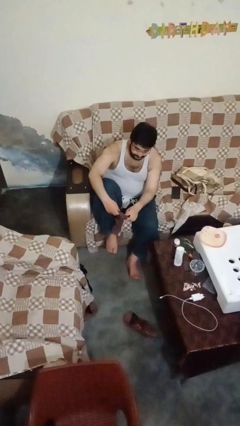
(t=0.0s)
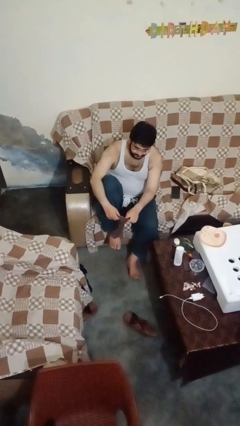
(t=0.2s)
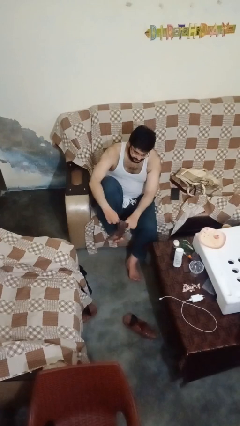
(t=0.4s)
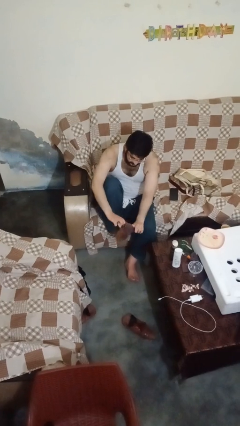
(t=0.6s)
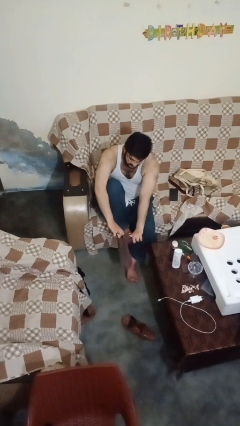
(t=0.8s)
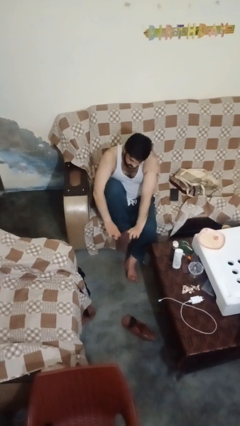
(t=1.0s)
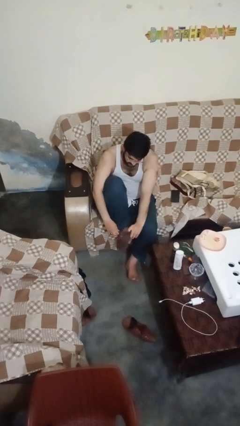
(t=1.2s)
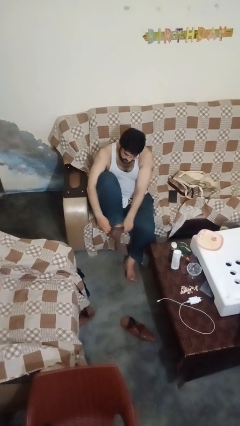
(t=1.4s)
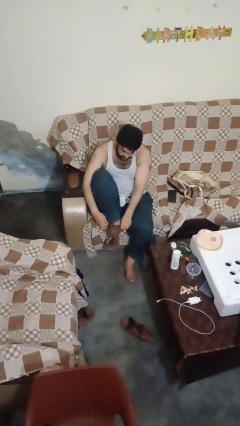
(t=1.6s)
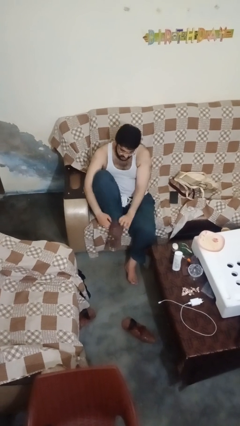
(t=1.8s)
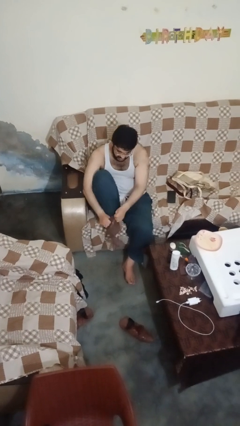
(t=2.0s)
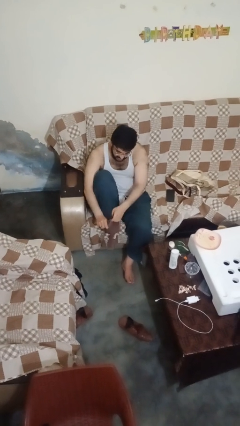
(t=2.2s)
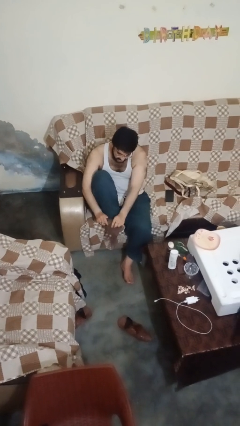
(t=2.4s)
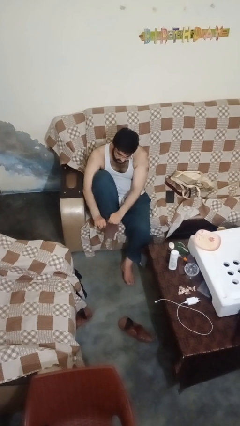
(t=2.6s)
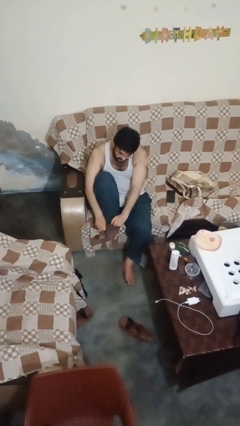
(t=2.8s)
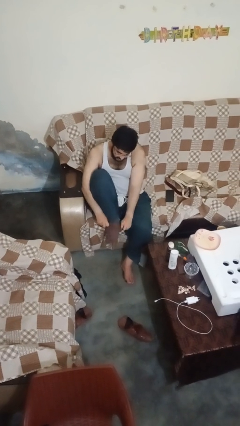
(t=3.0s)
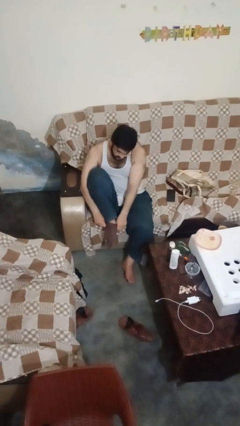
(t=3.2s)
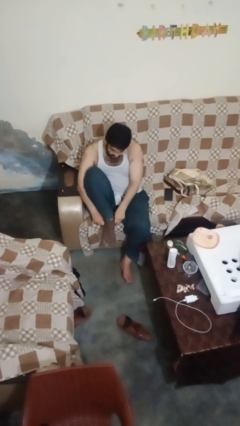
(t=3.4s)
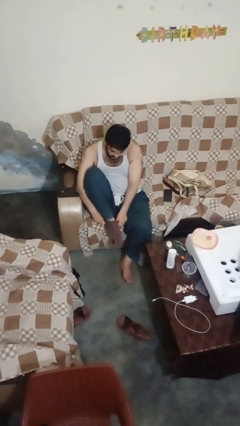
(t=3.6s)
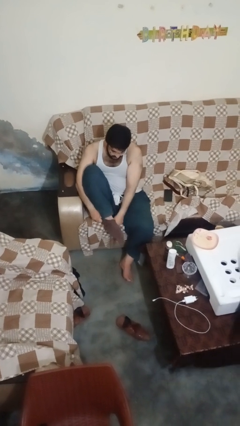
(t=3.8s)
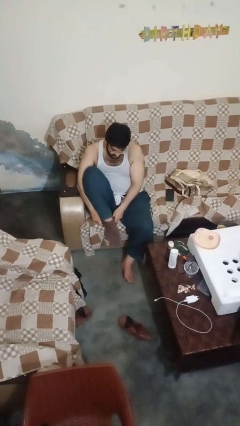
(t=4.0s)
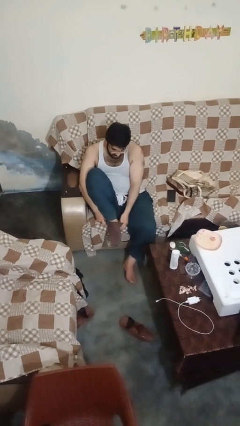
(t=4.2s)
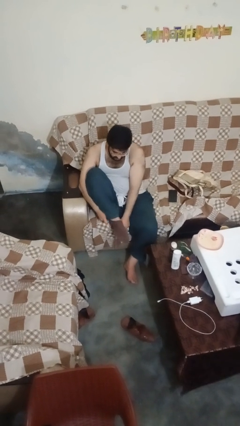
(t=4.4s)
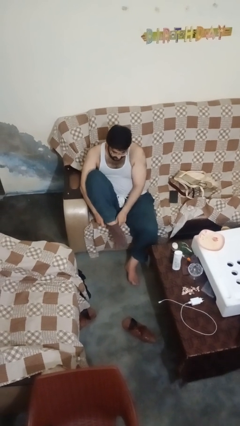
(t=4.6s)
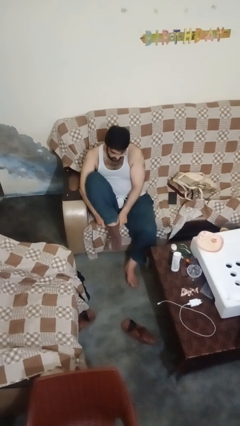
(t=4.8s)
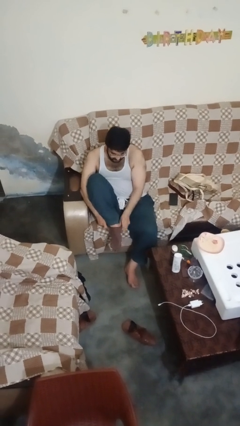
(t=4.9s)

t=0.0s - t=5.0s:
person puts on socks

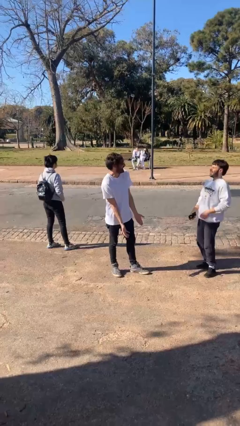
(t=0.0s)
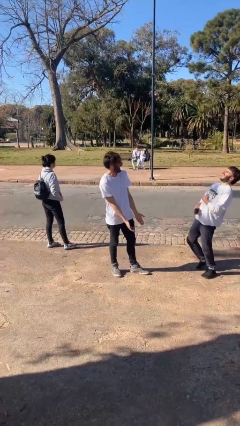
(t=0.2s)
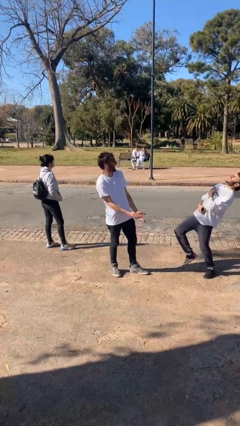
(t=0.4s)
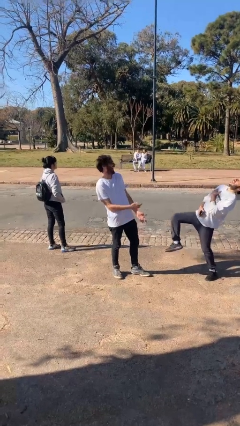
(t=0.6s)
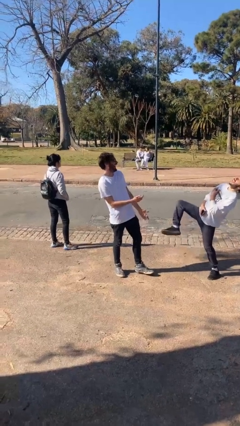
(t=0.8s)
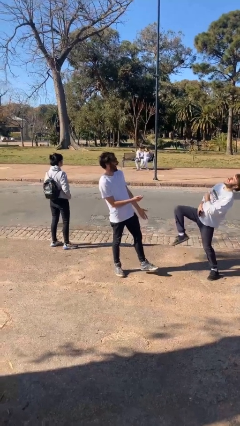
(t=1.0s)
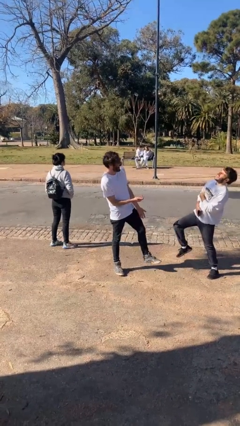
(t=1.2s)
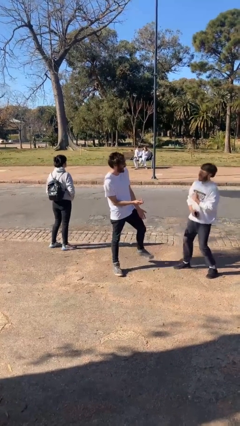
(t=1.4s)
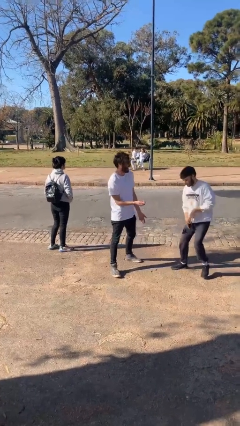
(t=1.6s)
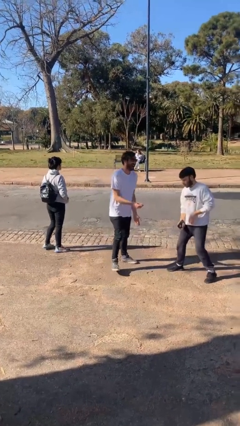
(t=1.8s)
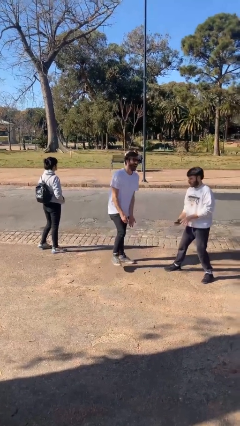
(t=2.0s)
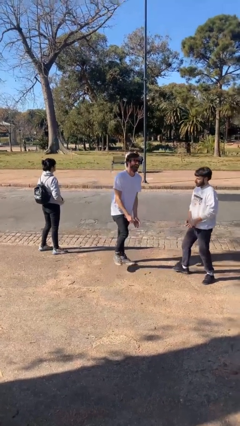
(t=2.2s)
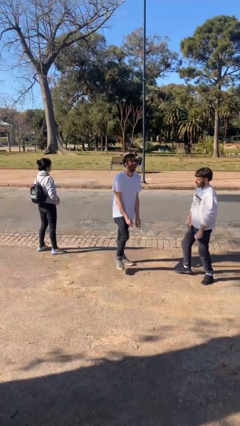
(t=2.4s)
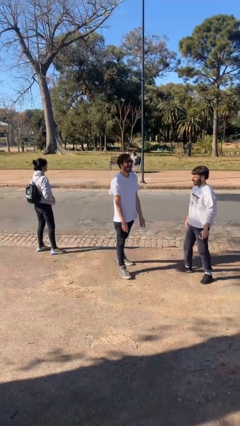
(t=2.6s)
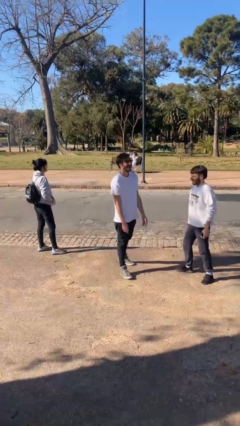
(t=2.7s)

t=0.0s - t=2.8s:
person laughs with person

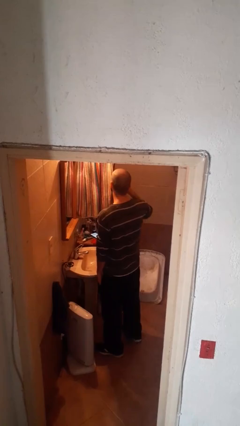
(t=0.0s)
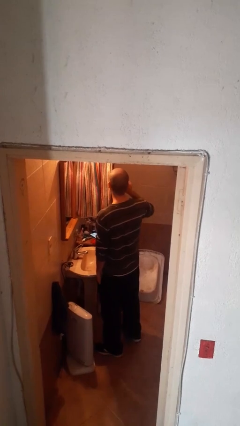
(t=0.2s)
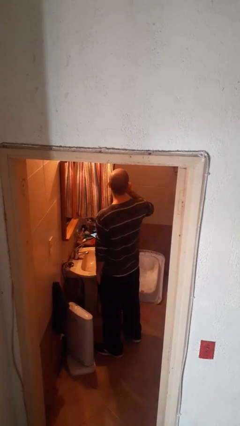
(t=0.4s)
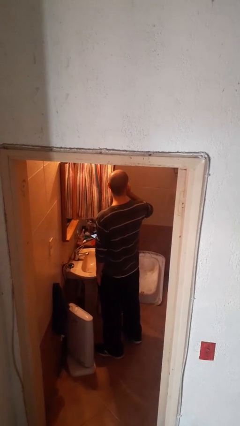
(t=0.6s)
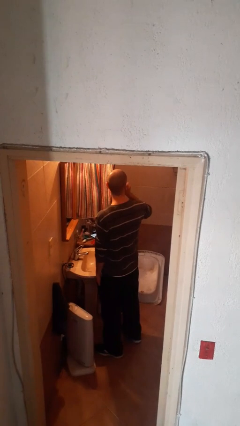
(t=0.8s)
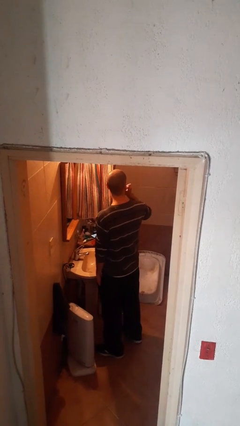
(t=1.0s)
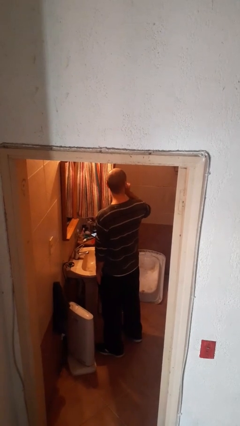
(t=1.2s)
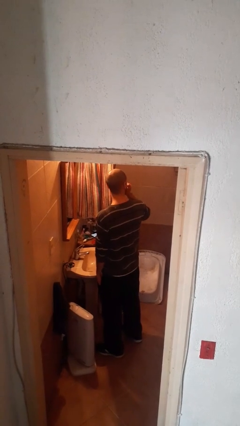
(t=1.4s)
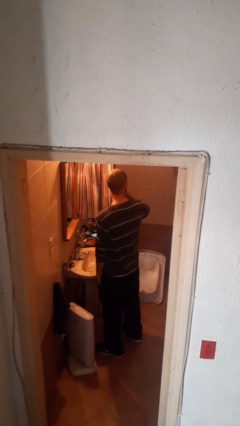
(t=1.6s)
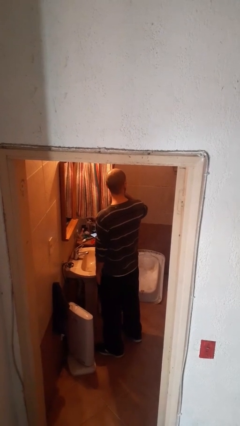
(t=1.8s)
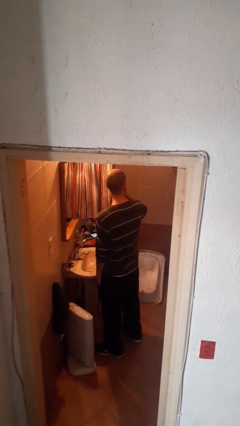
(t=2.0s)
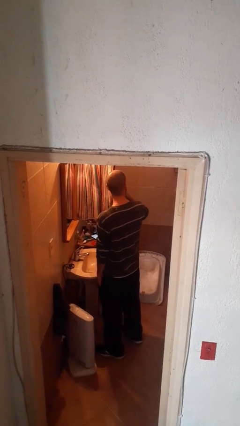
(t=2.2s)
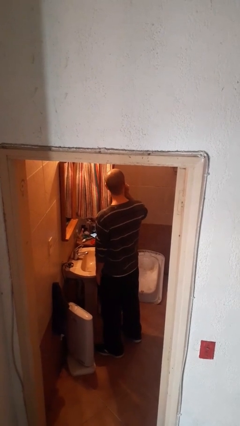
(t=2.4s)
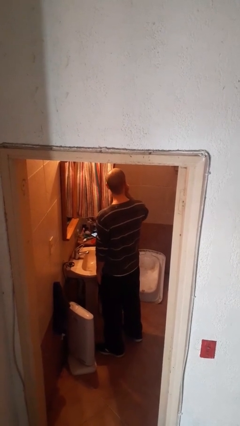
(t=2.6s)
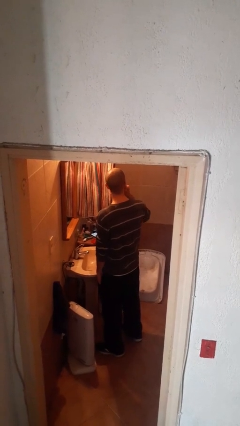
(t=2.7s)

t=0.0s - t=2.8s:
person brushes teeth

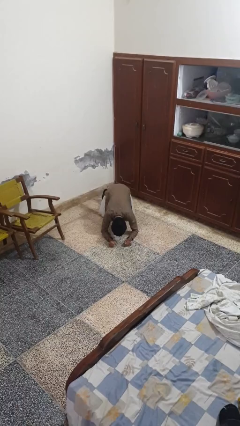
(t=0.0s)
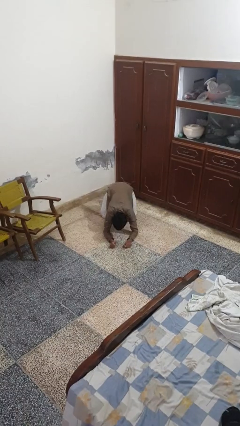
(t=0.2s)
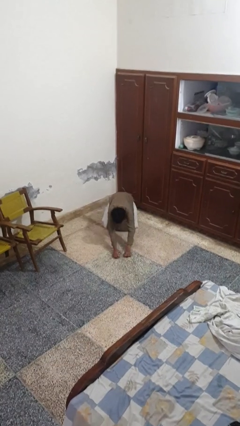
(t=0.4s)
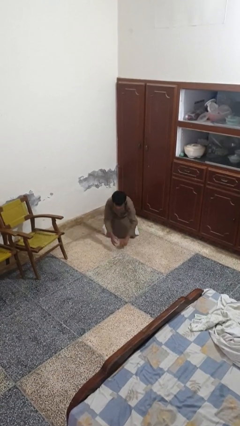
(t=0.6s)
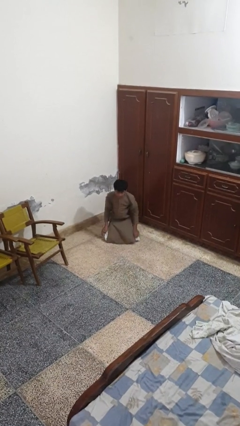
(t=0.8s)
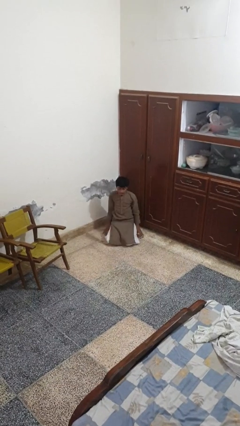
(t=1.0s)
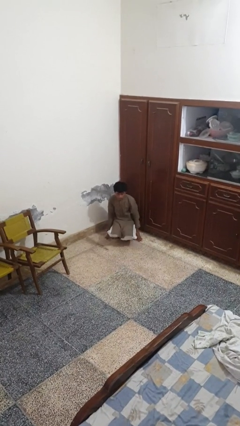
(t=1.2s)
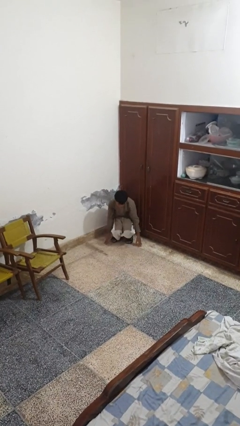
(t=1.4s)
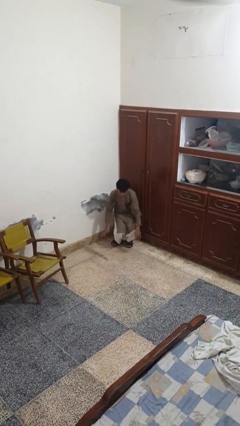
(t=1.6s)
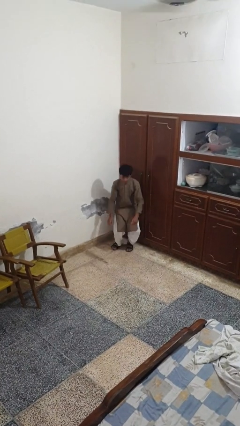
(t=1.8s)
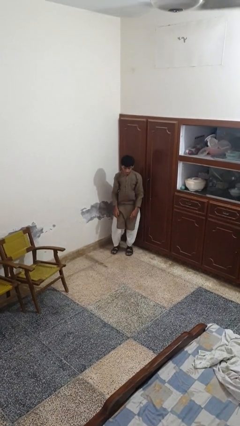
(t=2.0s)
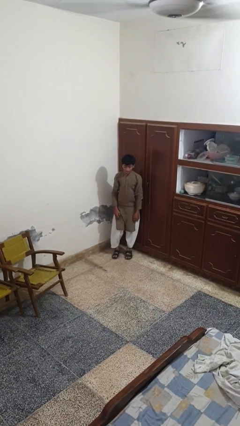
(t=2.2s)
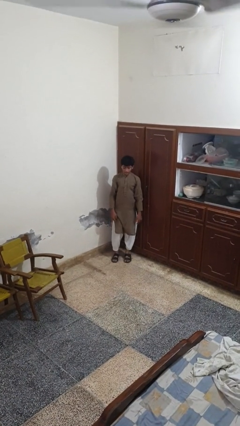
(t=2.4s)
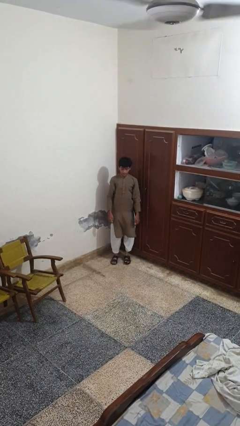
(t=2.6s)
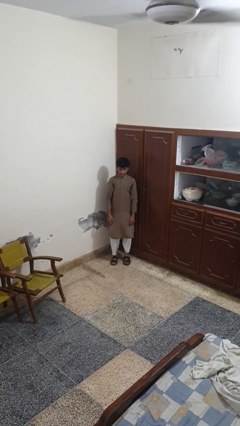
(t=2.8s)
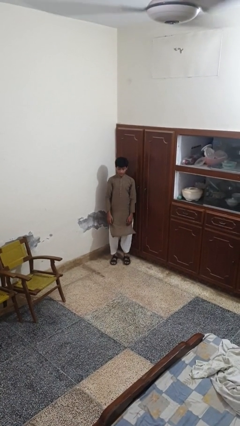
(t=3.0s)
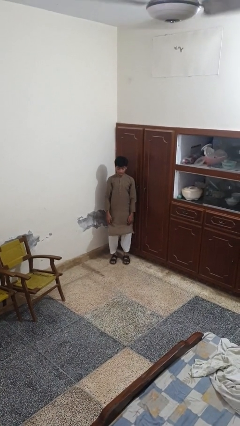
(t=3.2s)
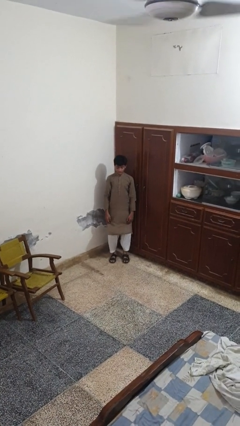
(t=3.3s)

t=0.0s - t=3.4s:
person stands up from floor

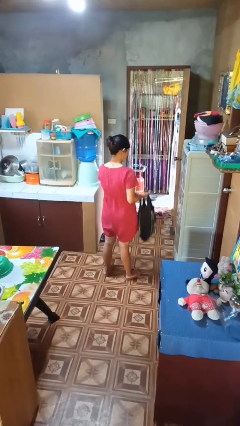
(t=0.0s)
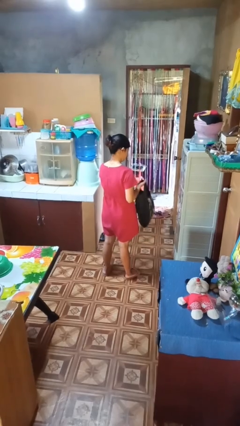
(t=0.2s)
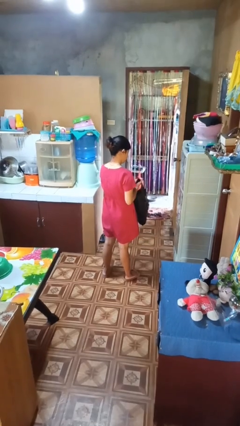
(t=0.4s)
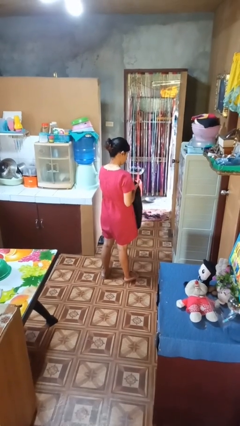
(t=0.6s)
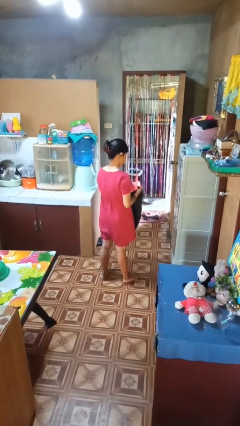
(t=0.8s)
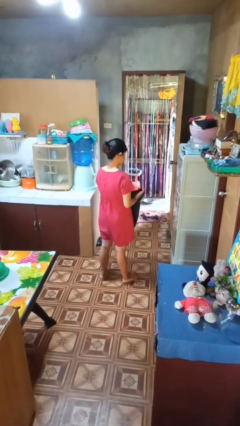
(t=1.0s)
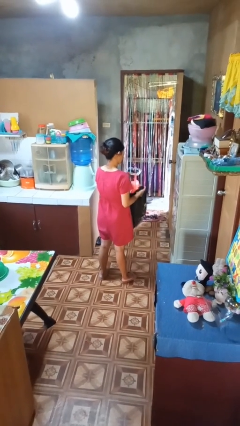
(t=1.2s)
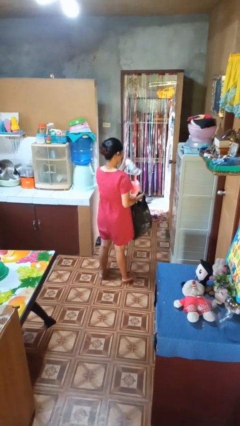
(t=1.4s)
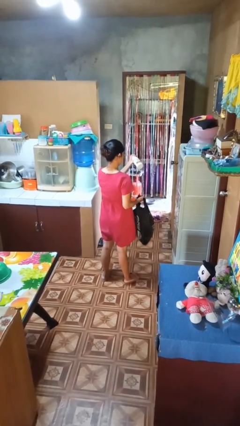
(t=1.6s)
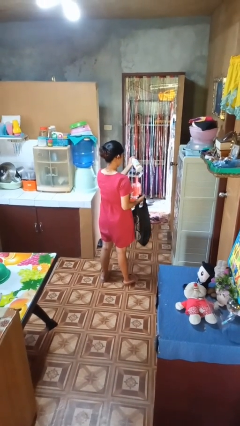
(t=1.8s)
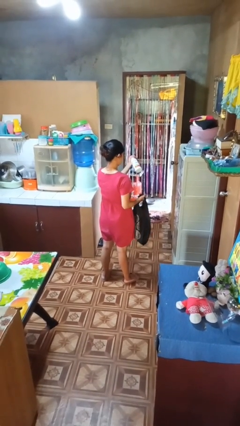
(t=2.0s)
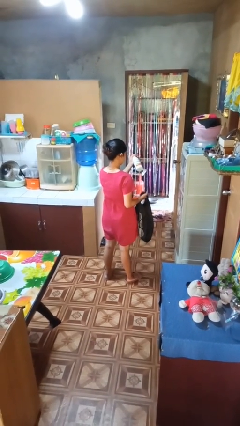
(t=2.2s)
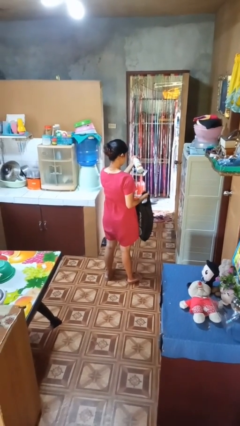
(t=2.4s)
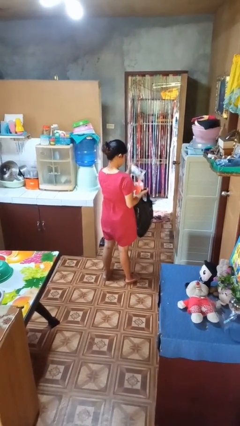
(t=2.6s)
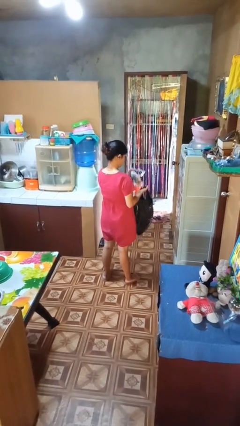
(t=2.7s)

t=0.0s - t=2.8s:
person takes object from bag

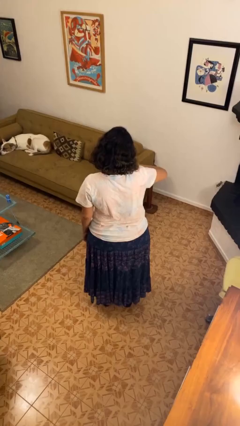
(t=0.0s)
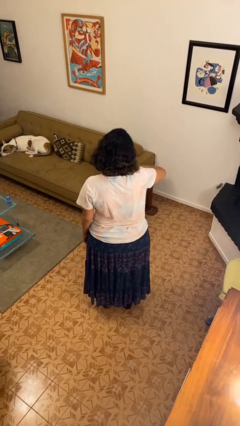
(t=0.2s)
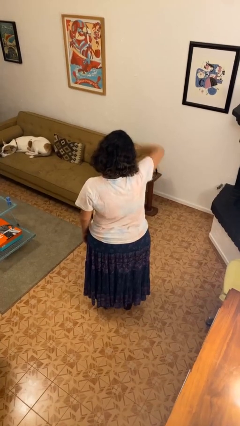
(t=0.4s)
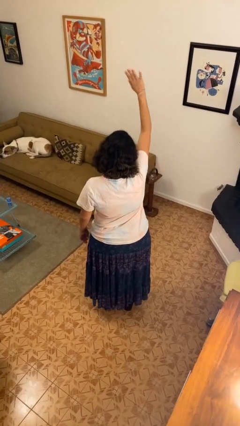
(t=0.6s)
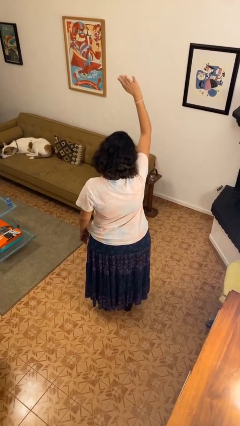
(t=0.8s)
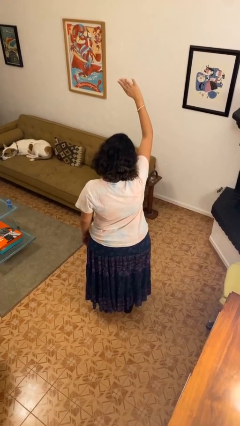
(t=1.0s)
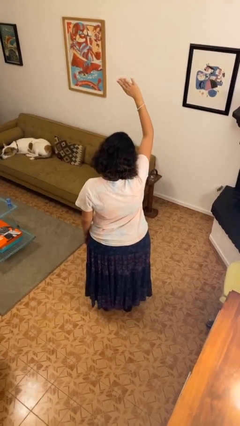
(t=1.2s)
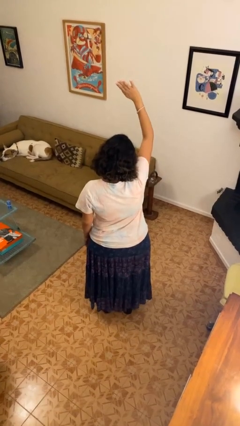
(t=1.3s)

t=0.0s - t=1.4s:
person gestures swipe up
